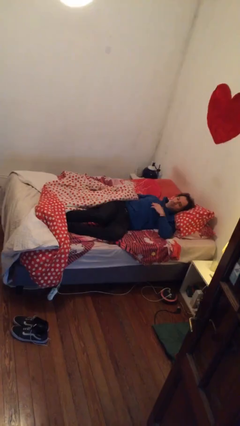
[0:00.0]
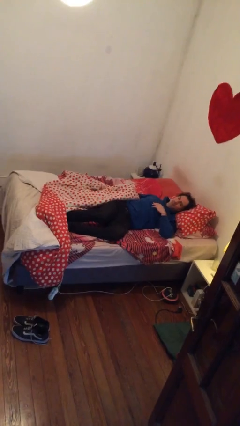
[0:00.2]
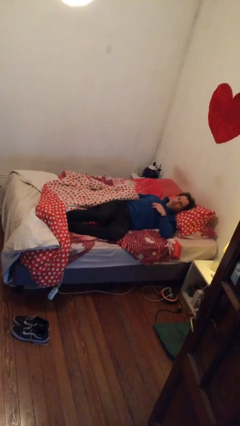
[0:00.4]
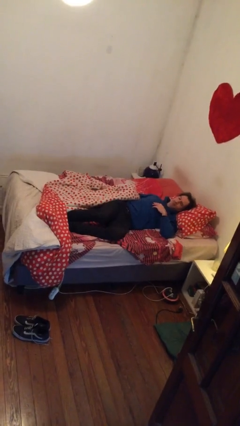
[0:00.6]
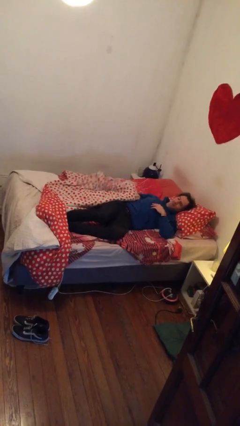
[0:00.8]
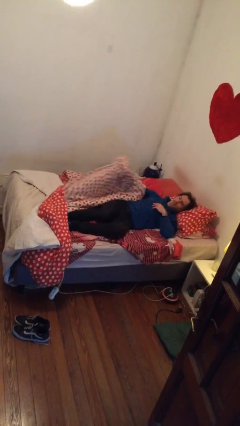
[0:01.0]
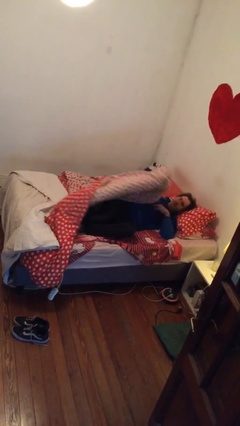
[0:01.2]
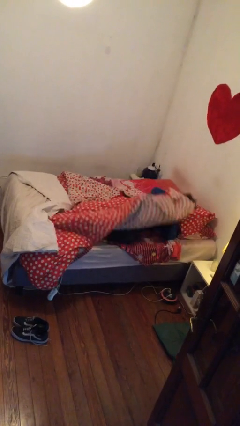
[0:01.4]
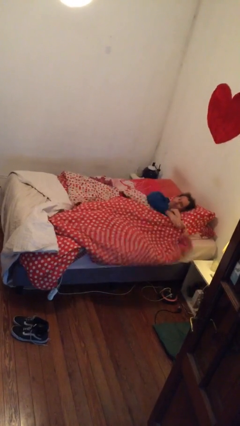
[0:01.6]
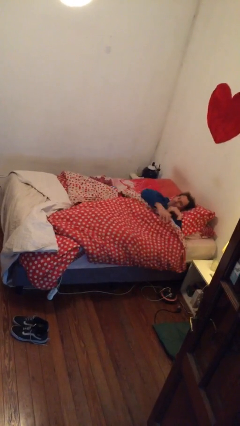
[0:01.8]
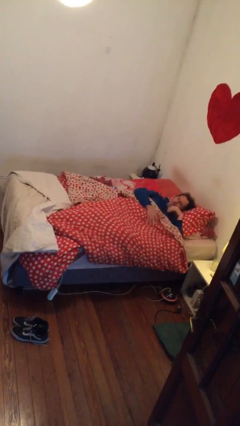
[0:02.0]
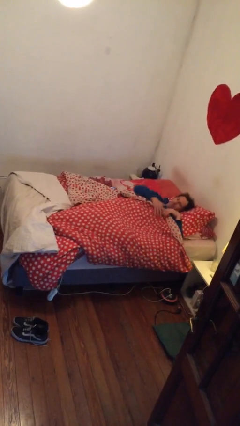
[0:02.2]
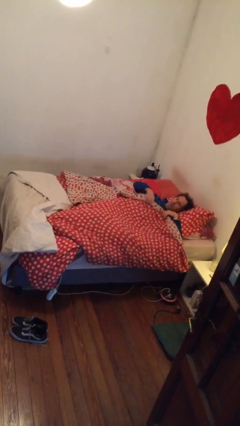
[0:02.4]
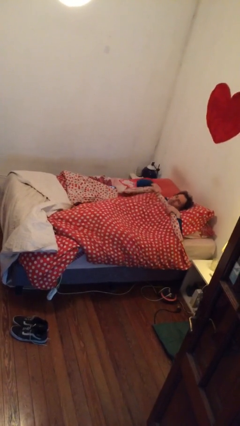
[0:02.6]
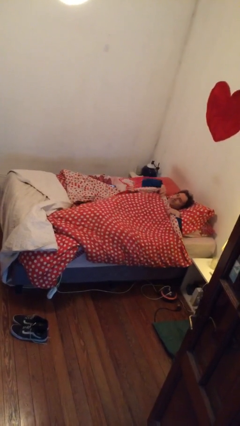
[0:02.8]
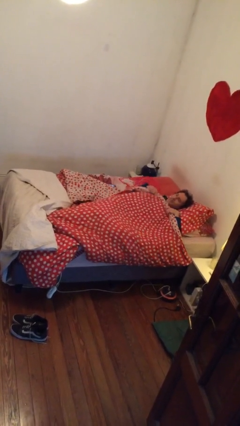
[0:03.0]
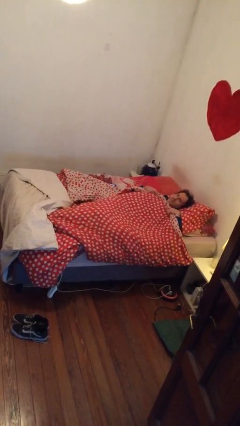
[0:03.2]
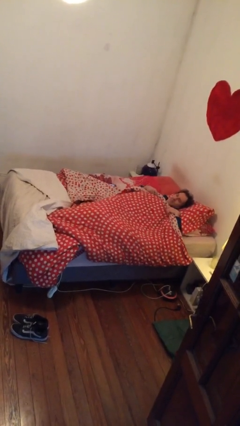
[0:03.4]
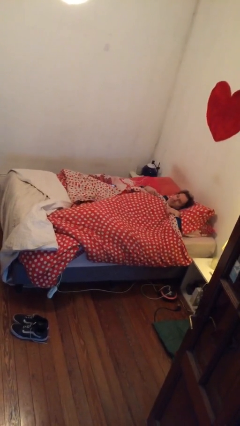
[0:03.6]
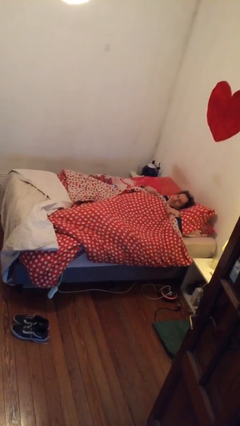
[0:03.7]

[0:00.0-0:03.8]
person covers with bedsheets

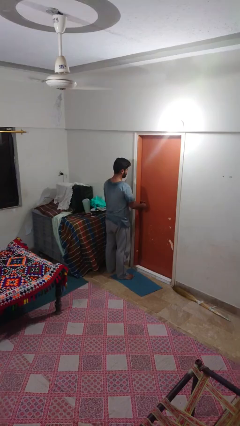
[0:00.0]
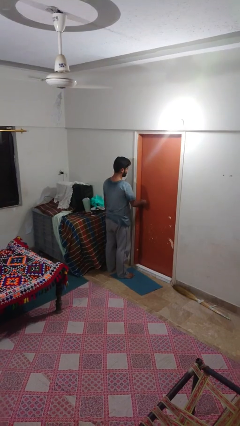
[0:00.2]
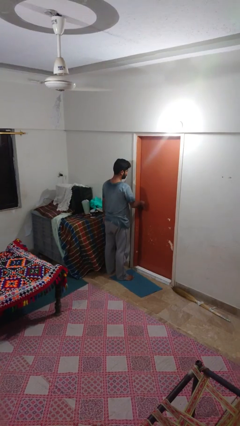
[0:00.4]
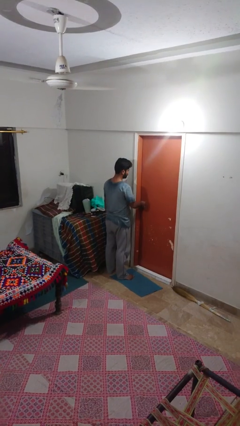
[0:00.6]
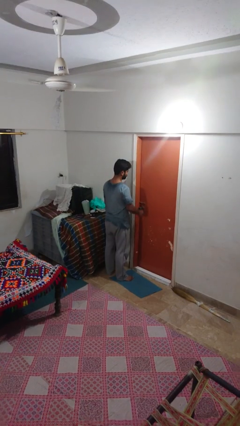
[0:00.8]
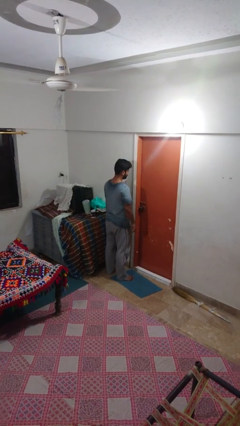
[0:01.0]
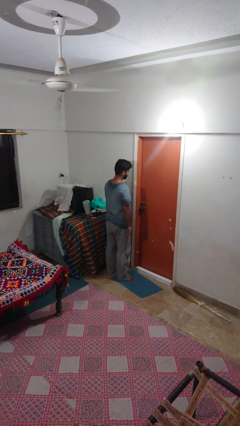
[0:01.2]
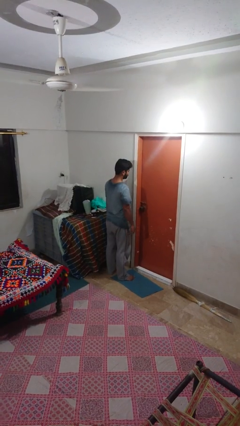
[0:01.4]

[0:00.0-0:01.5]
person locks door with keys

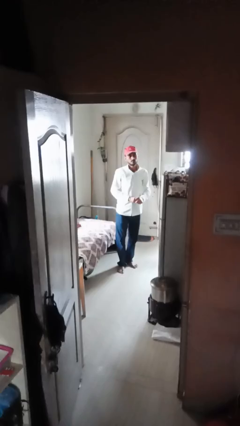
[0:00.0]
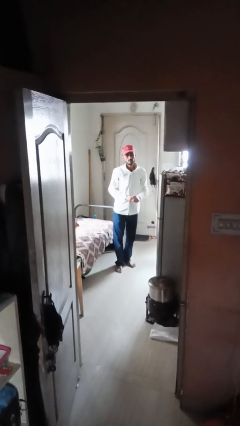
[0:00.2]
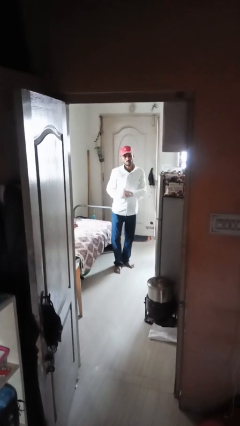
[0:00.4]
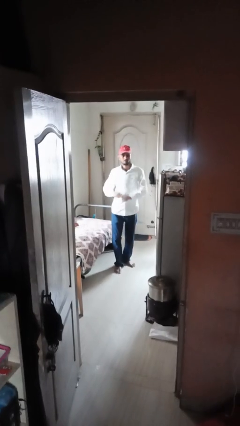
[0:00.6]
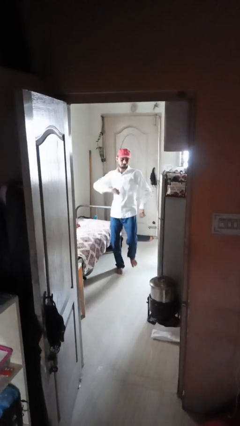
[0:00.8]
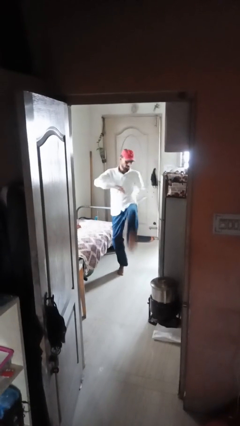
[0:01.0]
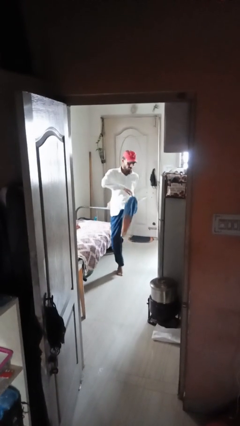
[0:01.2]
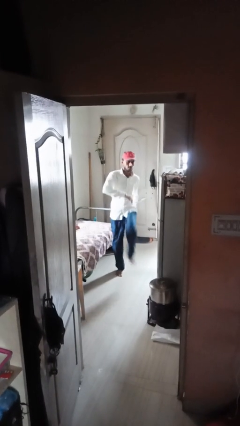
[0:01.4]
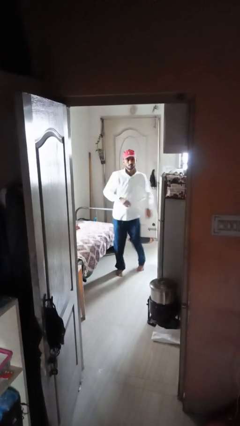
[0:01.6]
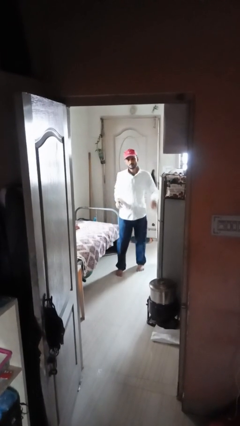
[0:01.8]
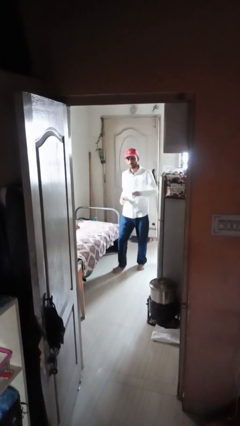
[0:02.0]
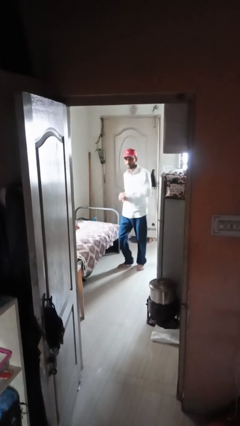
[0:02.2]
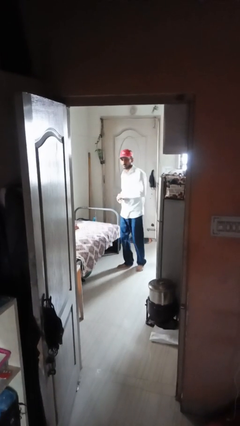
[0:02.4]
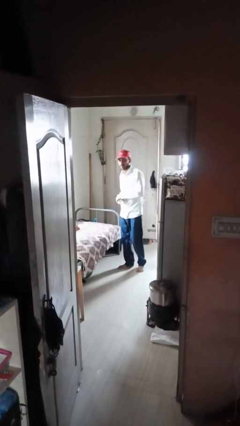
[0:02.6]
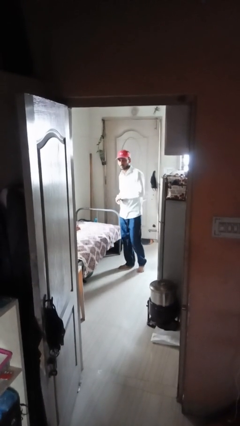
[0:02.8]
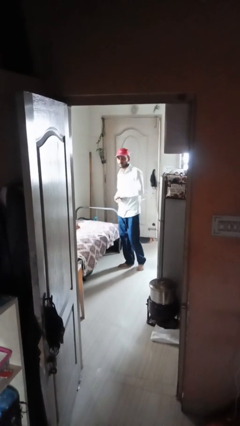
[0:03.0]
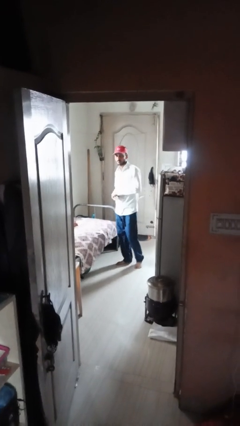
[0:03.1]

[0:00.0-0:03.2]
person karate kicks

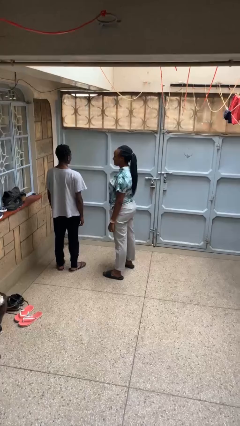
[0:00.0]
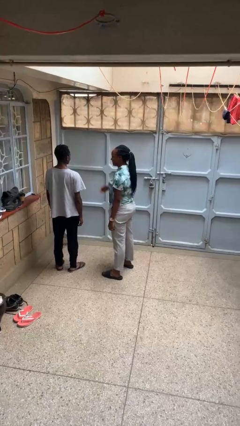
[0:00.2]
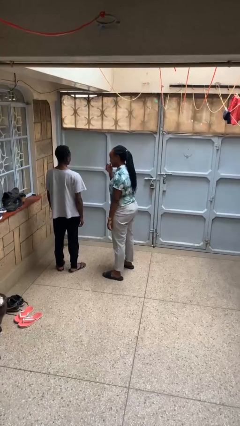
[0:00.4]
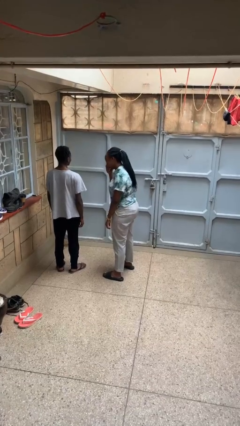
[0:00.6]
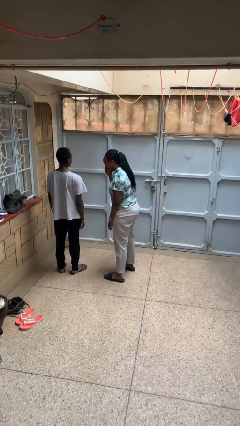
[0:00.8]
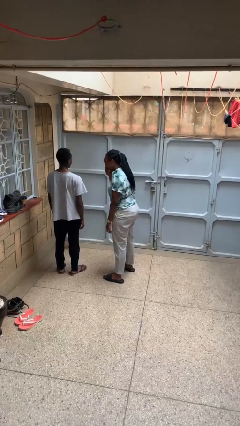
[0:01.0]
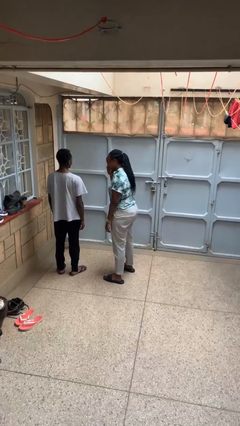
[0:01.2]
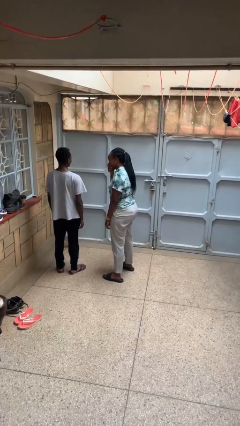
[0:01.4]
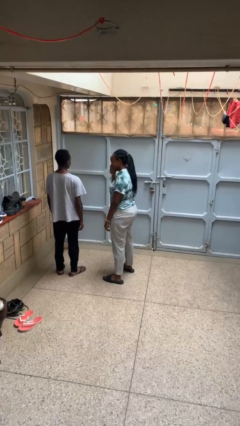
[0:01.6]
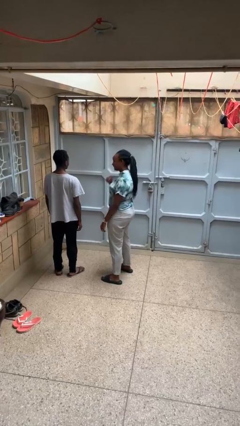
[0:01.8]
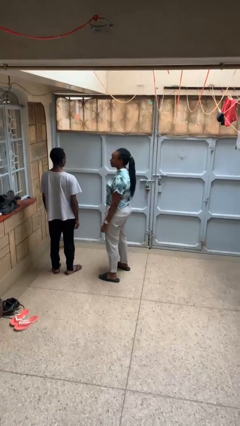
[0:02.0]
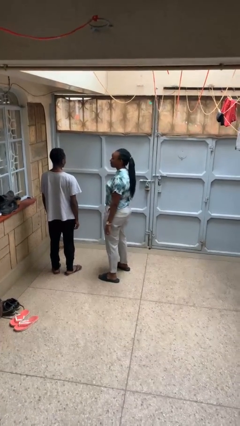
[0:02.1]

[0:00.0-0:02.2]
person laughs with person

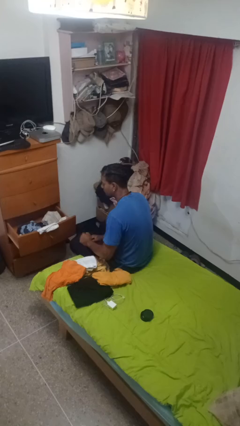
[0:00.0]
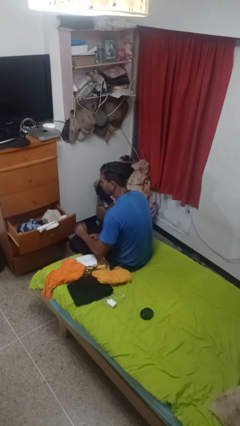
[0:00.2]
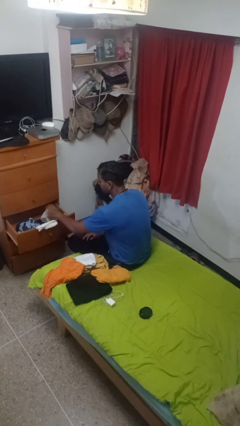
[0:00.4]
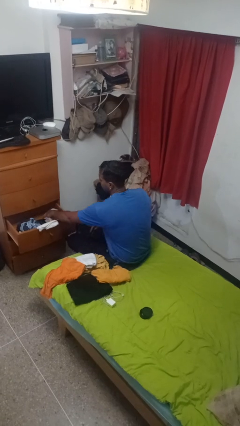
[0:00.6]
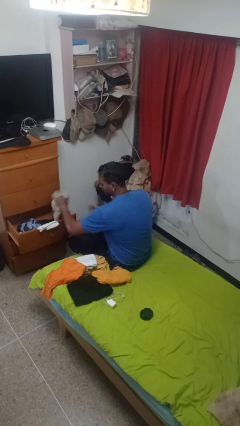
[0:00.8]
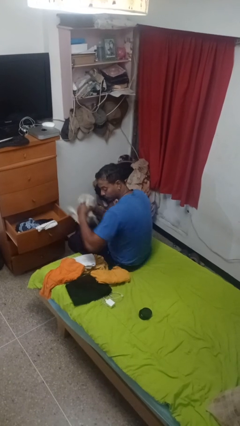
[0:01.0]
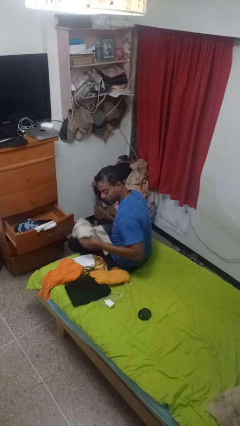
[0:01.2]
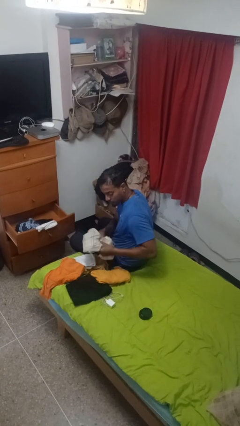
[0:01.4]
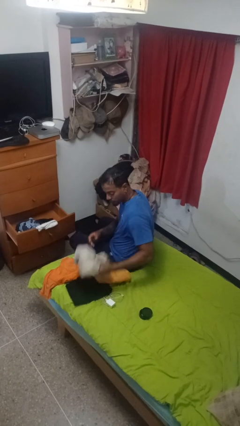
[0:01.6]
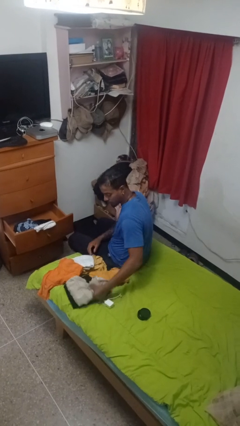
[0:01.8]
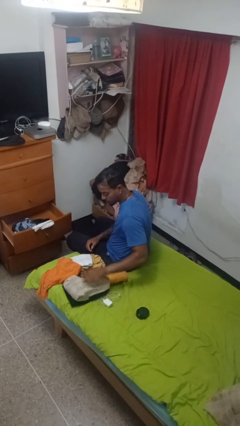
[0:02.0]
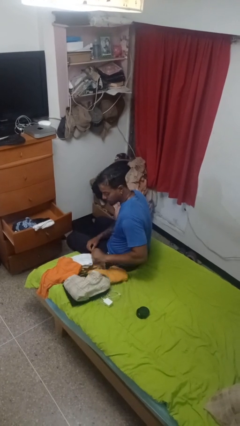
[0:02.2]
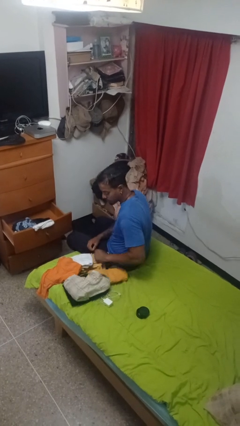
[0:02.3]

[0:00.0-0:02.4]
person takes clothes from dresser

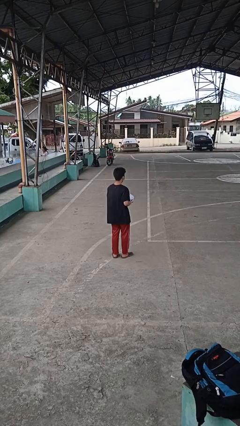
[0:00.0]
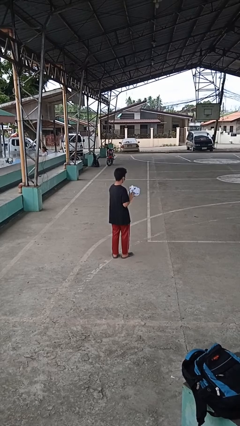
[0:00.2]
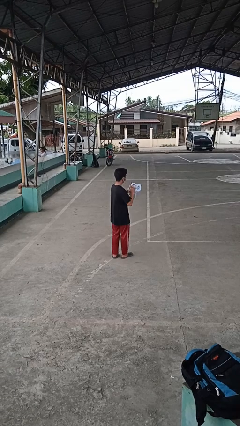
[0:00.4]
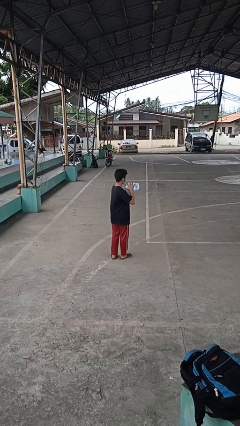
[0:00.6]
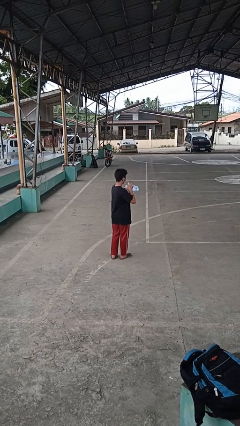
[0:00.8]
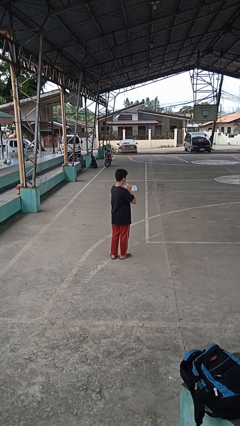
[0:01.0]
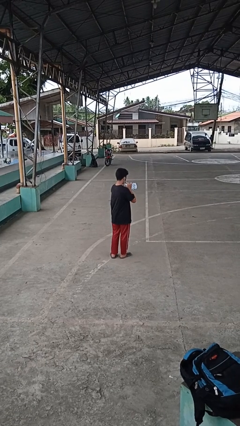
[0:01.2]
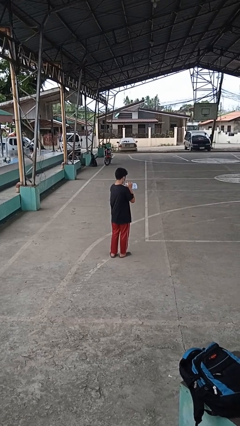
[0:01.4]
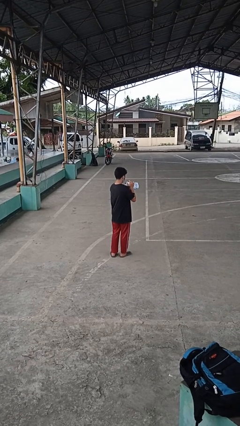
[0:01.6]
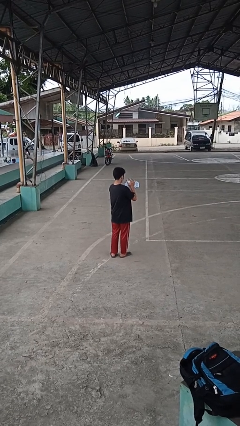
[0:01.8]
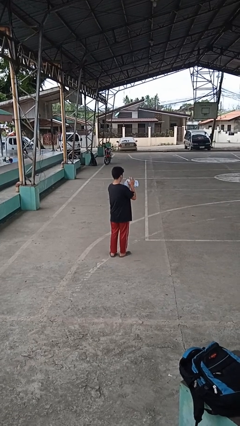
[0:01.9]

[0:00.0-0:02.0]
person squeezes object

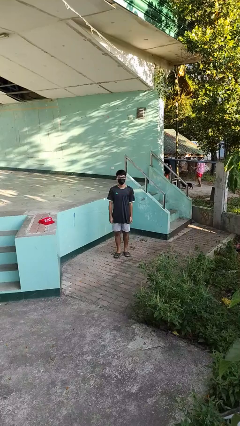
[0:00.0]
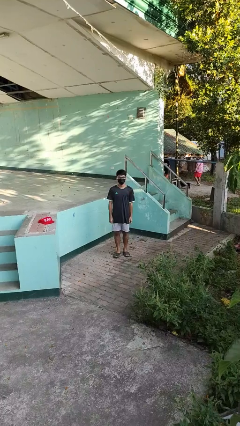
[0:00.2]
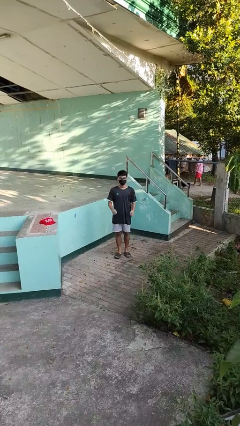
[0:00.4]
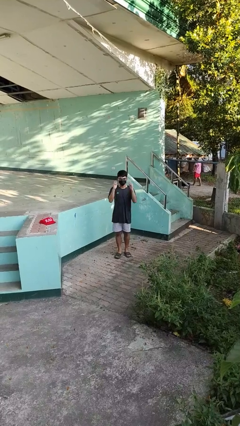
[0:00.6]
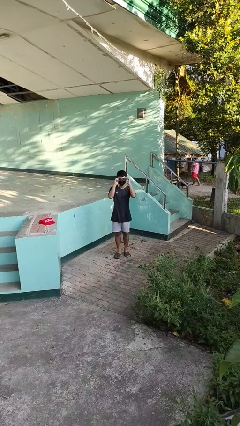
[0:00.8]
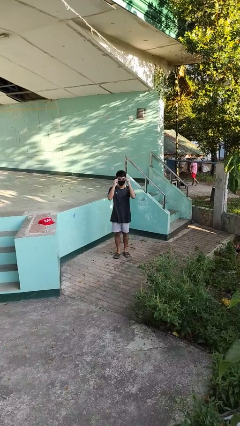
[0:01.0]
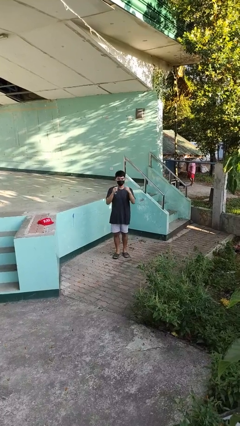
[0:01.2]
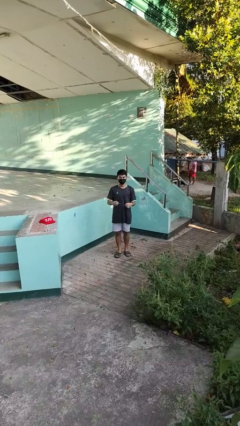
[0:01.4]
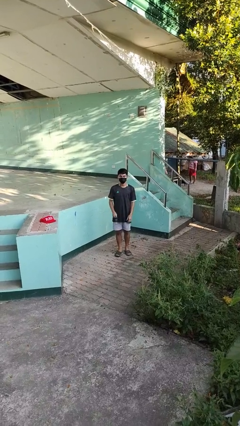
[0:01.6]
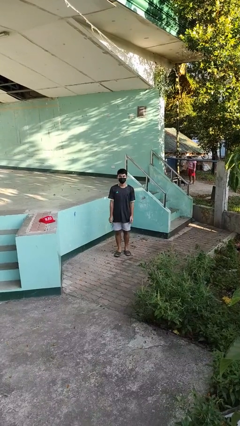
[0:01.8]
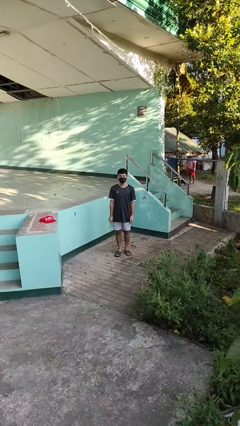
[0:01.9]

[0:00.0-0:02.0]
person takes off glasses
